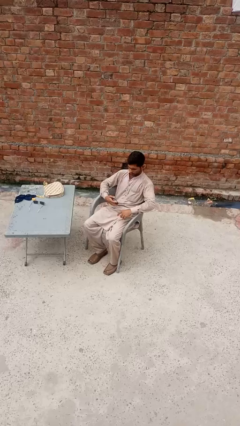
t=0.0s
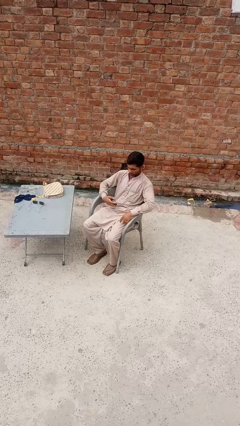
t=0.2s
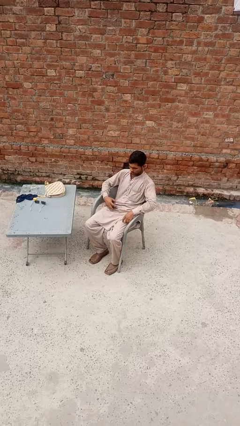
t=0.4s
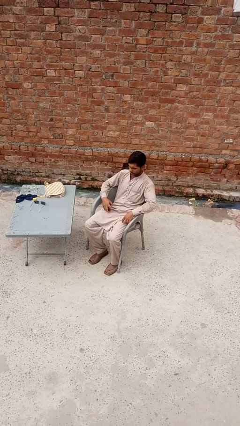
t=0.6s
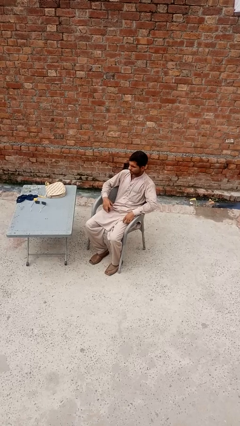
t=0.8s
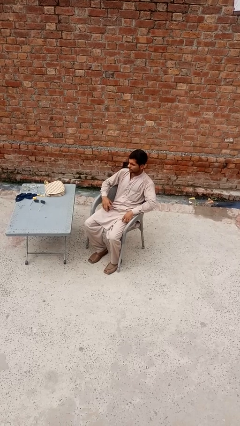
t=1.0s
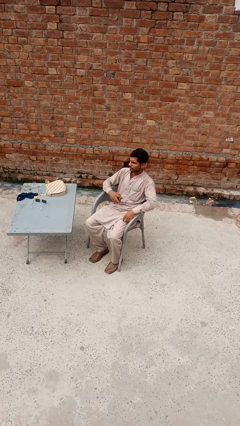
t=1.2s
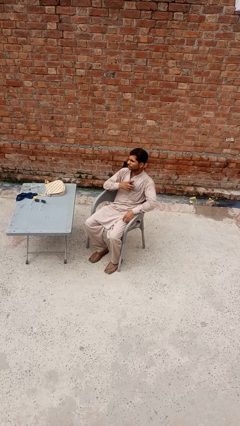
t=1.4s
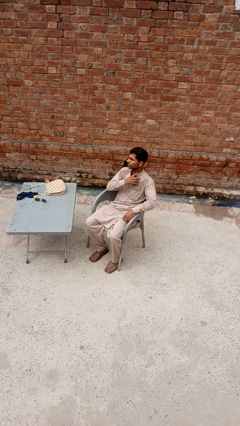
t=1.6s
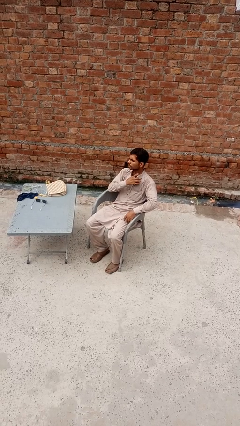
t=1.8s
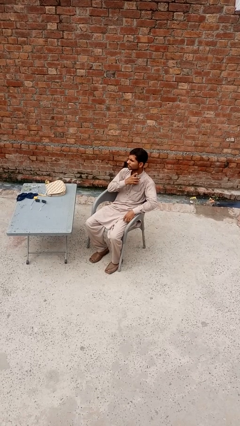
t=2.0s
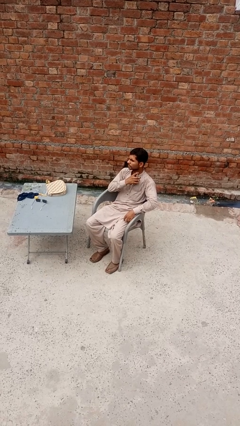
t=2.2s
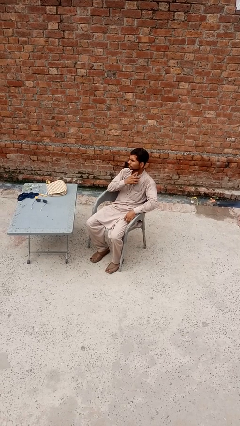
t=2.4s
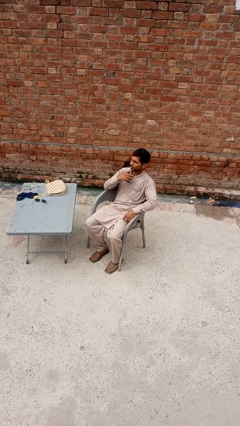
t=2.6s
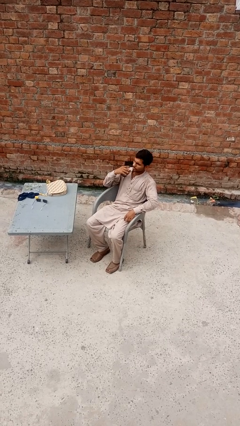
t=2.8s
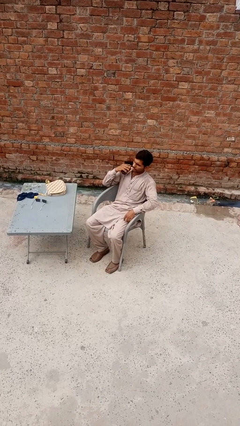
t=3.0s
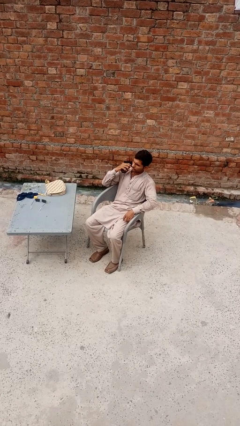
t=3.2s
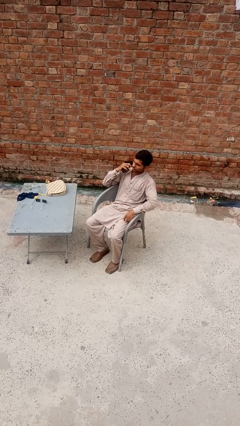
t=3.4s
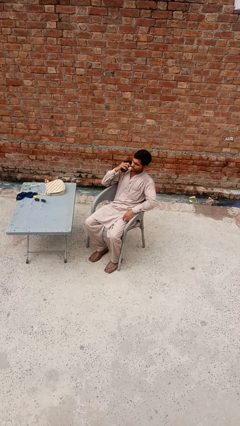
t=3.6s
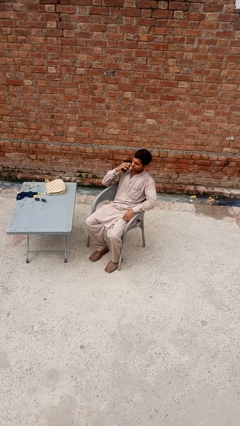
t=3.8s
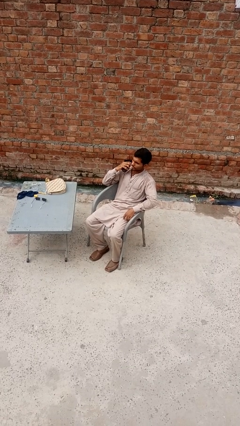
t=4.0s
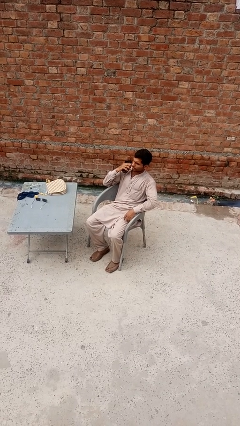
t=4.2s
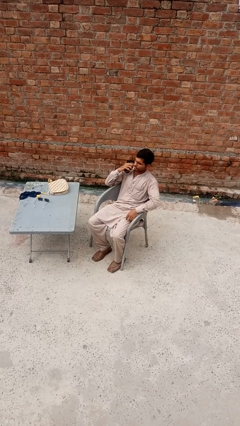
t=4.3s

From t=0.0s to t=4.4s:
person applies deodorant

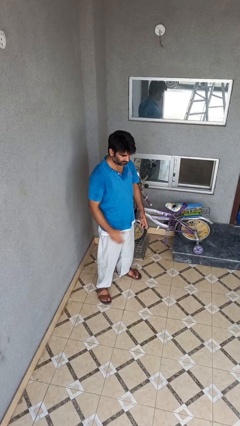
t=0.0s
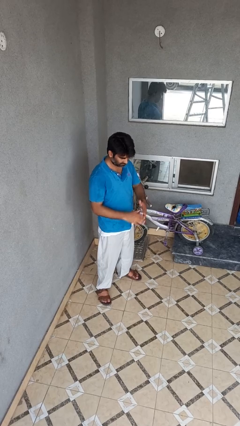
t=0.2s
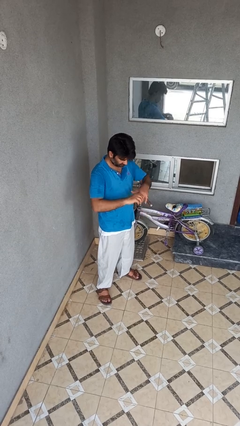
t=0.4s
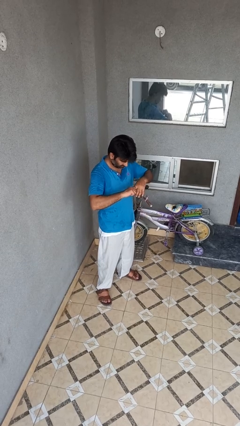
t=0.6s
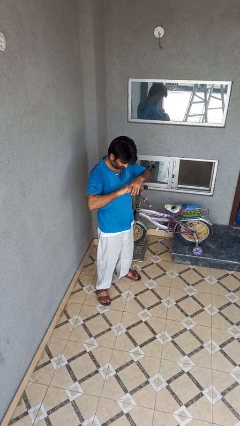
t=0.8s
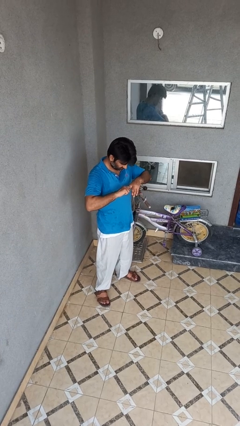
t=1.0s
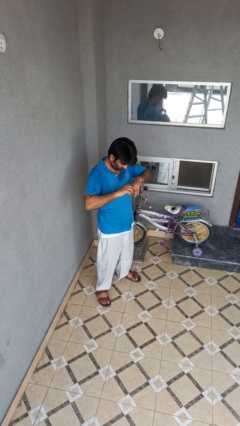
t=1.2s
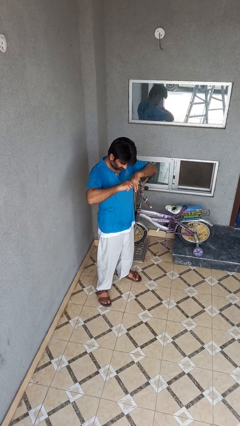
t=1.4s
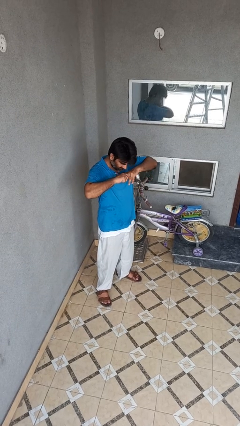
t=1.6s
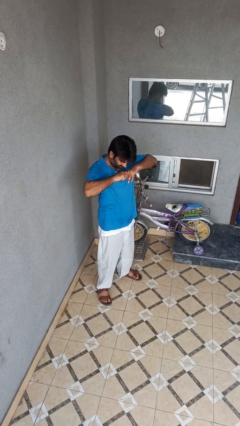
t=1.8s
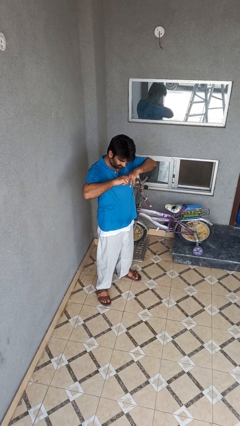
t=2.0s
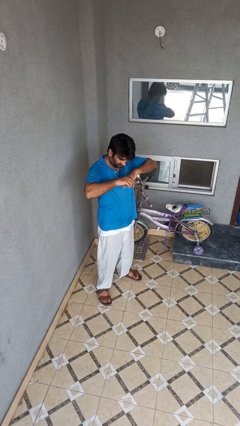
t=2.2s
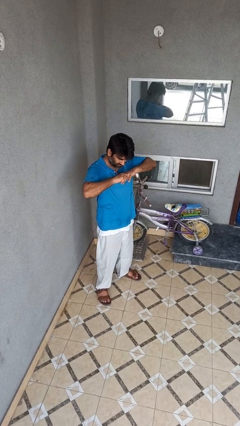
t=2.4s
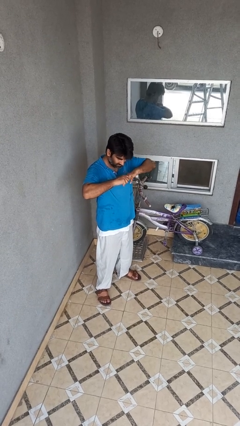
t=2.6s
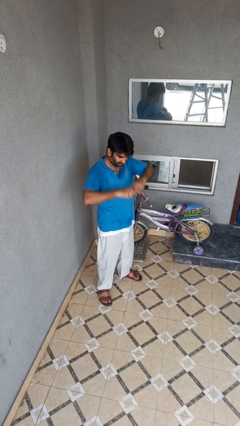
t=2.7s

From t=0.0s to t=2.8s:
person cracks knuckles

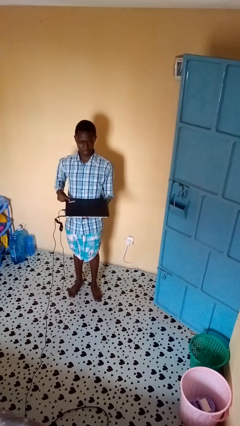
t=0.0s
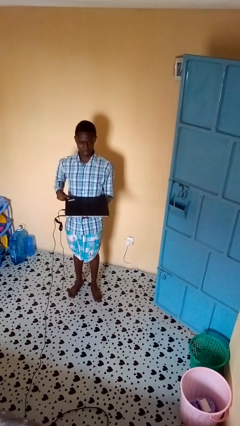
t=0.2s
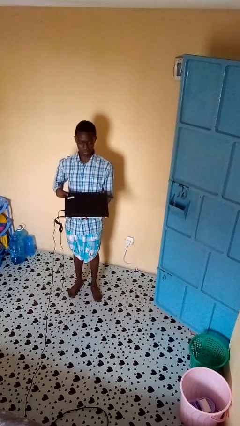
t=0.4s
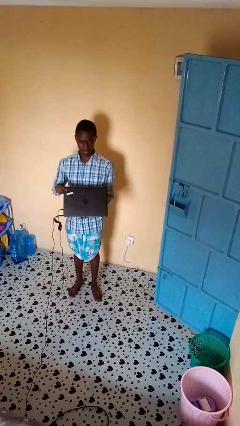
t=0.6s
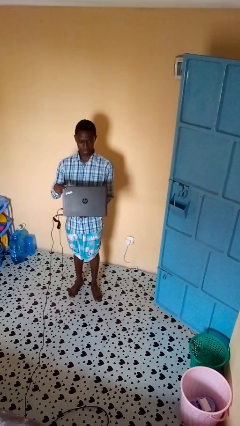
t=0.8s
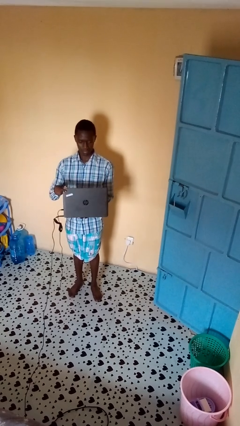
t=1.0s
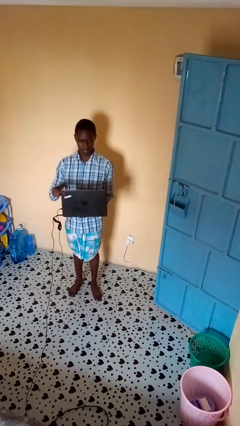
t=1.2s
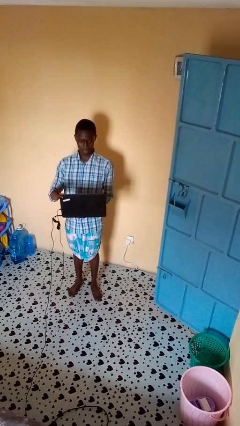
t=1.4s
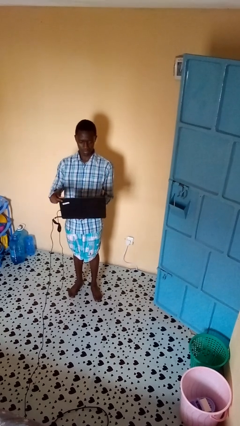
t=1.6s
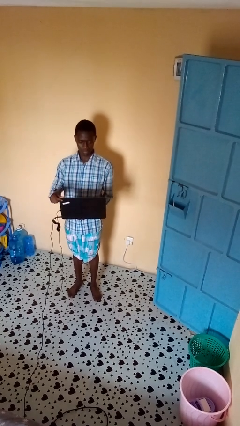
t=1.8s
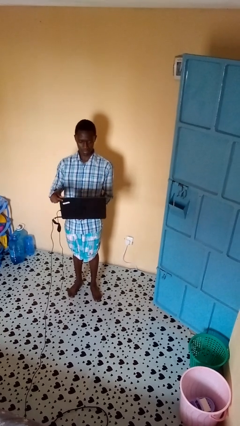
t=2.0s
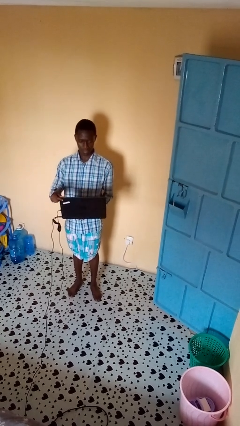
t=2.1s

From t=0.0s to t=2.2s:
person opens laptop

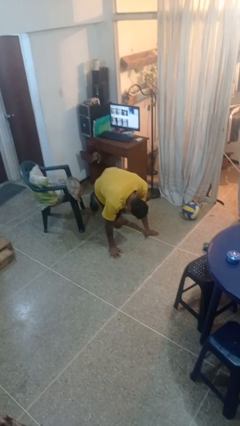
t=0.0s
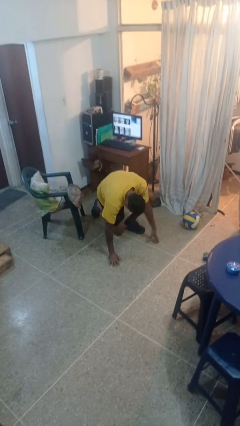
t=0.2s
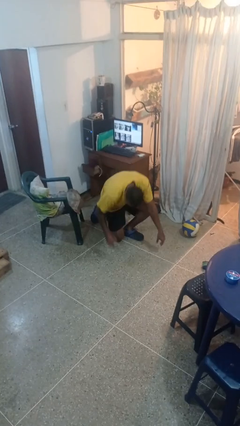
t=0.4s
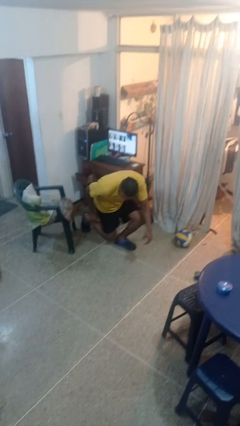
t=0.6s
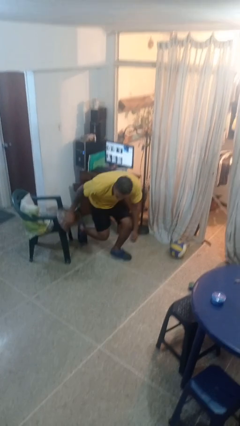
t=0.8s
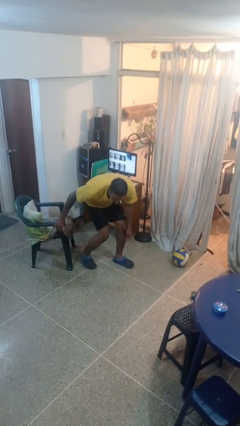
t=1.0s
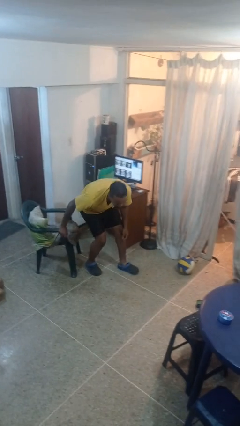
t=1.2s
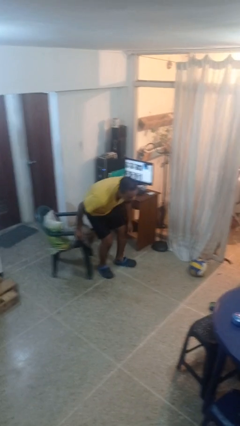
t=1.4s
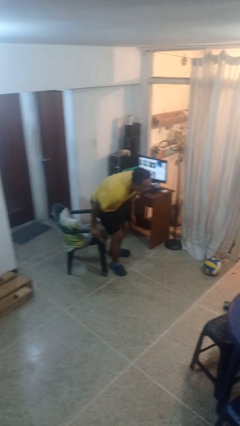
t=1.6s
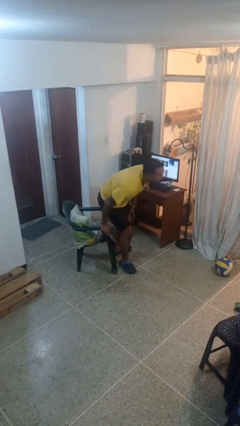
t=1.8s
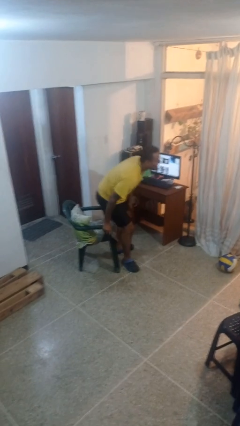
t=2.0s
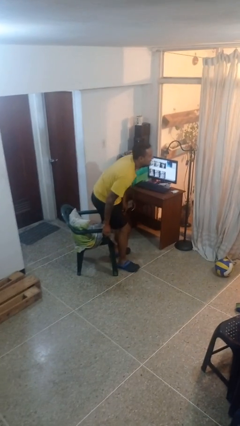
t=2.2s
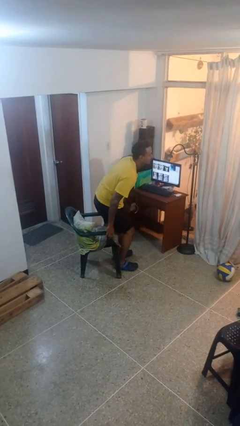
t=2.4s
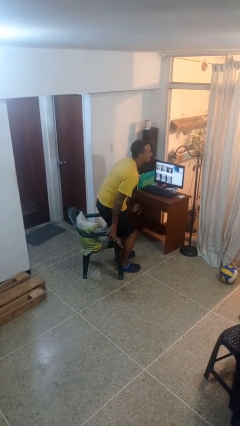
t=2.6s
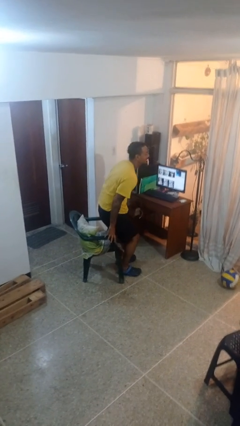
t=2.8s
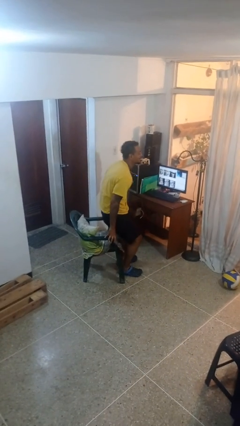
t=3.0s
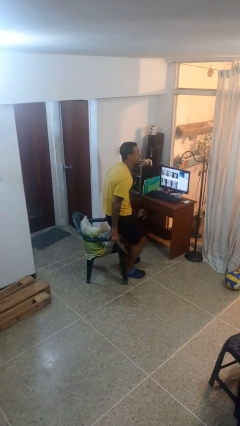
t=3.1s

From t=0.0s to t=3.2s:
person stands up from floor

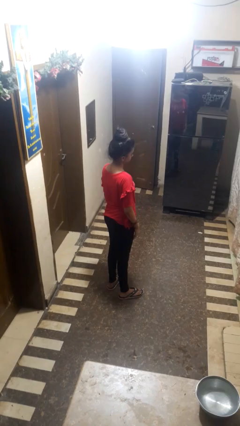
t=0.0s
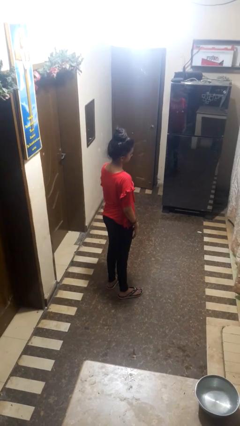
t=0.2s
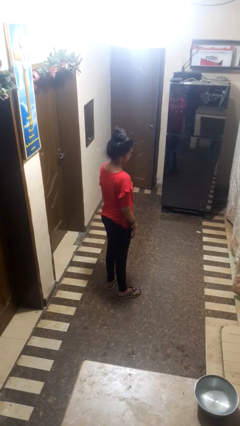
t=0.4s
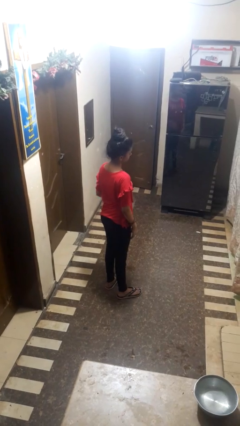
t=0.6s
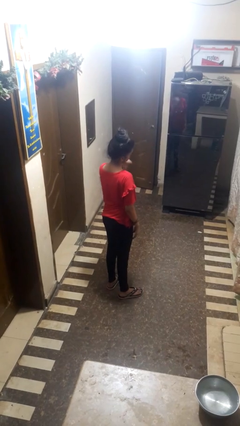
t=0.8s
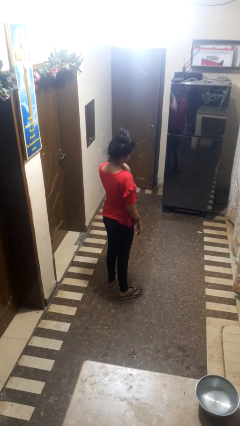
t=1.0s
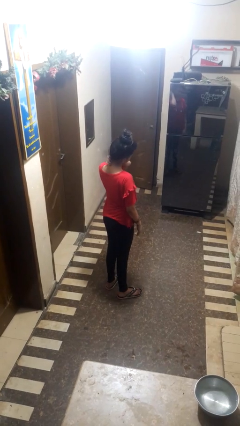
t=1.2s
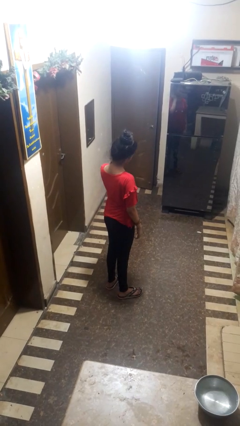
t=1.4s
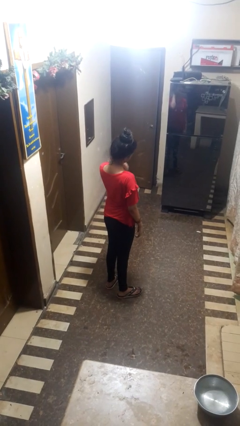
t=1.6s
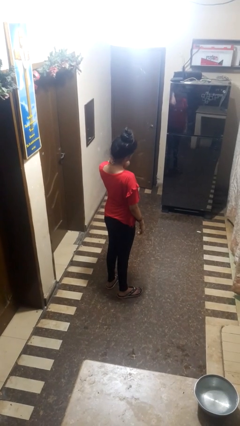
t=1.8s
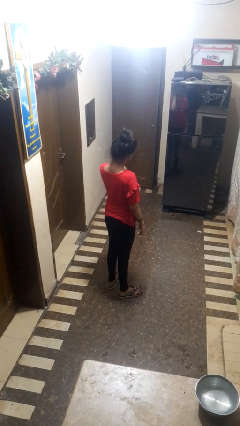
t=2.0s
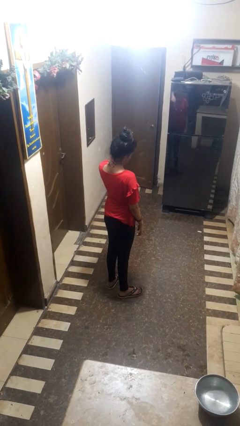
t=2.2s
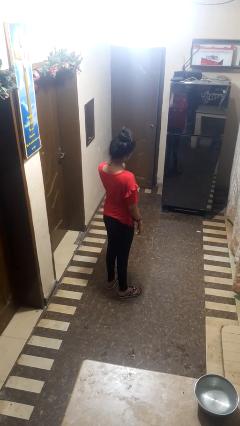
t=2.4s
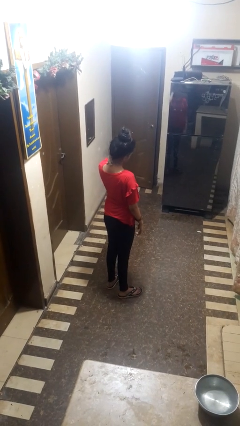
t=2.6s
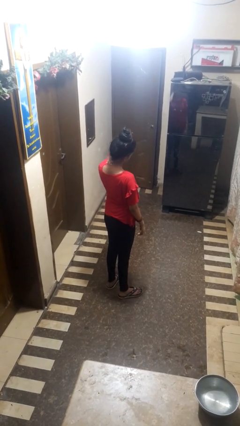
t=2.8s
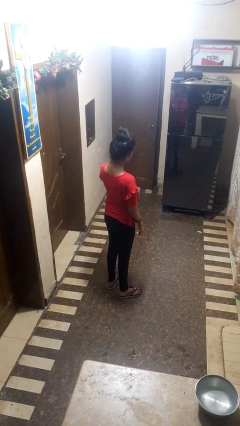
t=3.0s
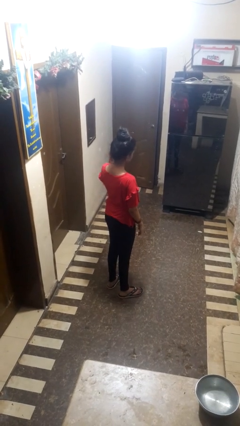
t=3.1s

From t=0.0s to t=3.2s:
person rubs neck

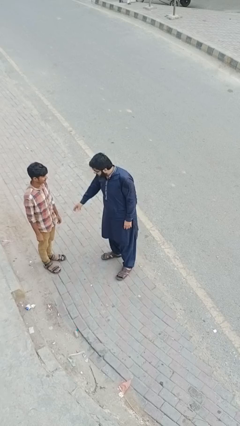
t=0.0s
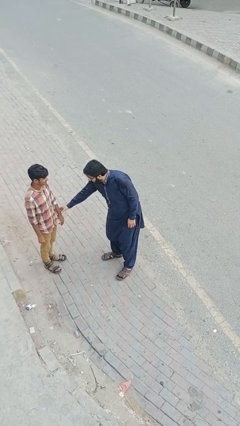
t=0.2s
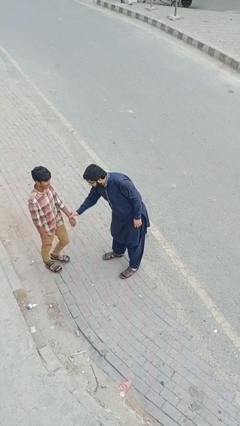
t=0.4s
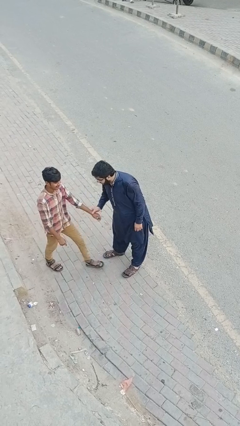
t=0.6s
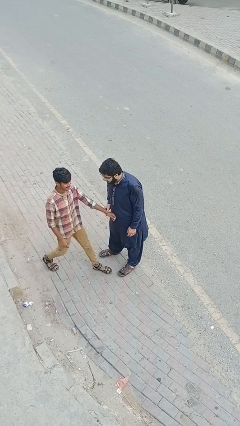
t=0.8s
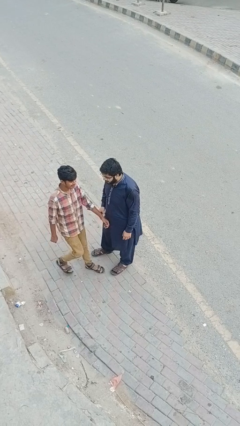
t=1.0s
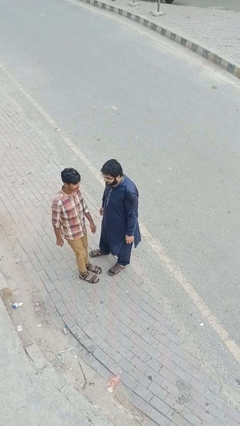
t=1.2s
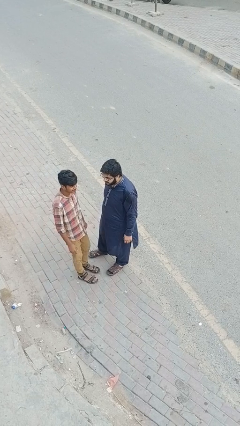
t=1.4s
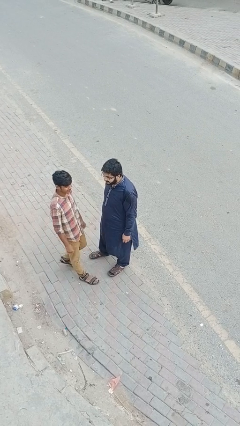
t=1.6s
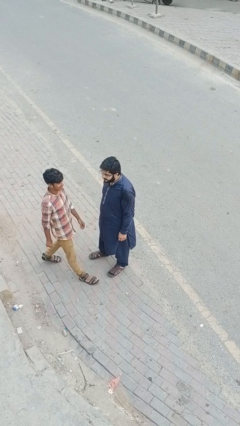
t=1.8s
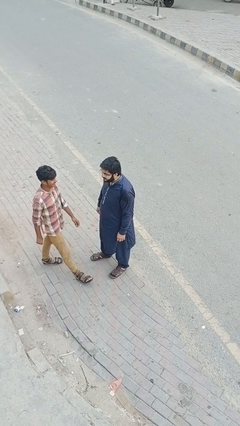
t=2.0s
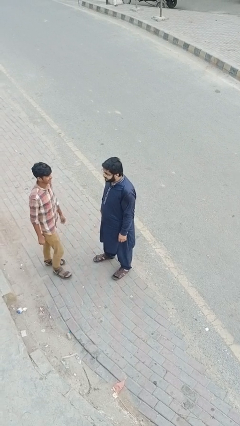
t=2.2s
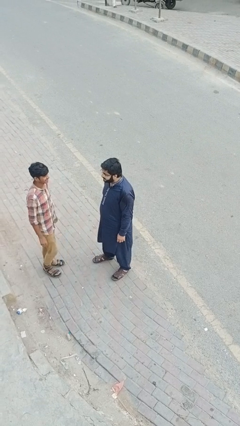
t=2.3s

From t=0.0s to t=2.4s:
person grabs person by forearm
